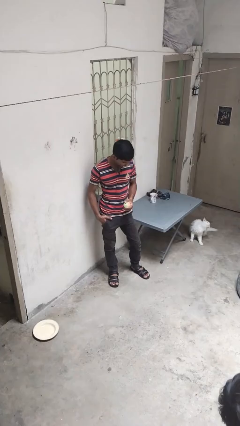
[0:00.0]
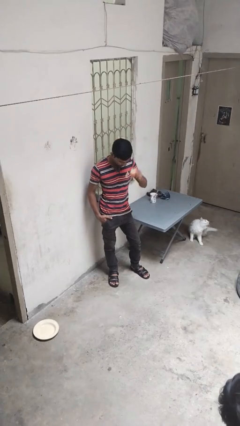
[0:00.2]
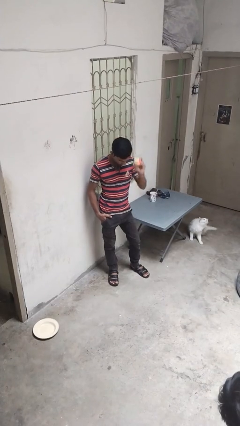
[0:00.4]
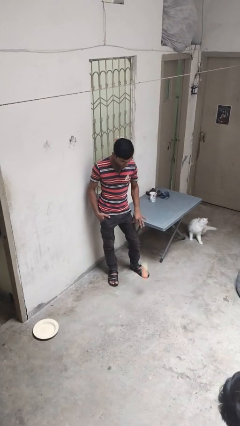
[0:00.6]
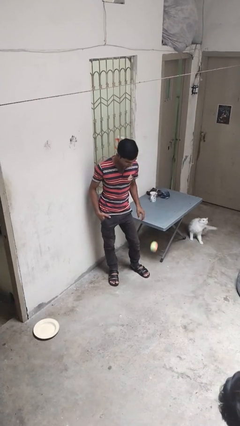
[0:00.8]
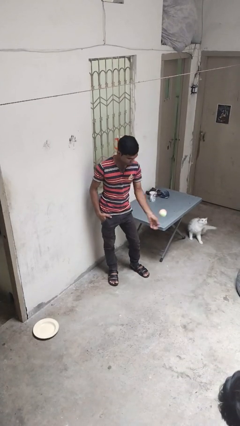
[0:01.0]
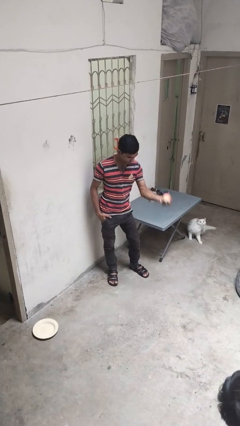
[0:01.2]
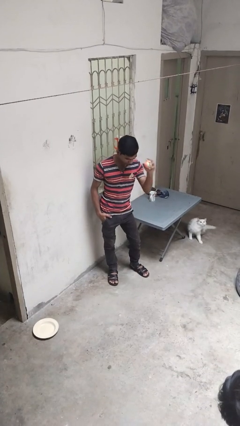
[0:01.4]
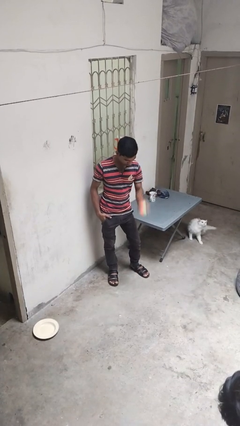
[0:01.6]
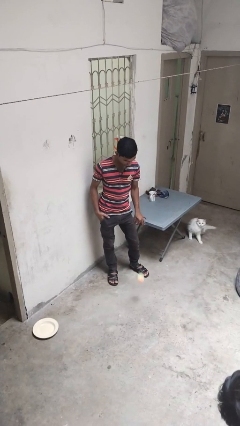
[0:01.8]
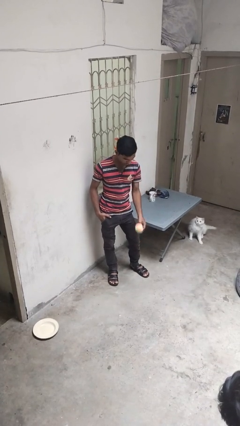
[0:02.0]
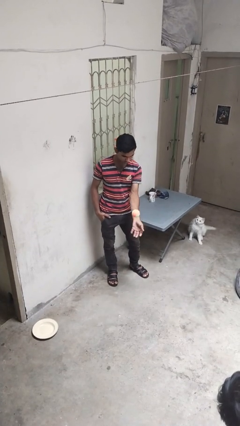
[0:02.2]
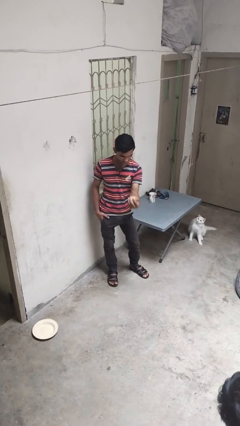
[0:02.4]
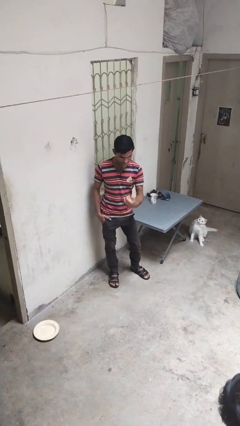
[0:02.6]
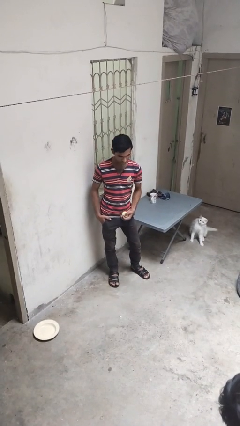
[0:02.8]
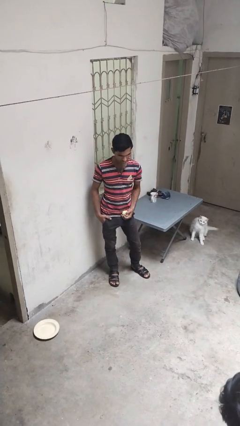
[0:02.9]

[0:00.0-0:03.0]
person bounces ball on floor

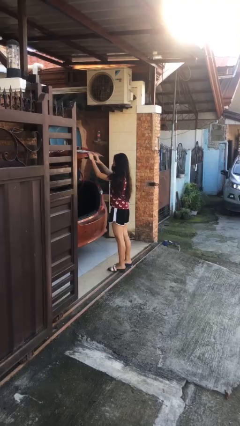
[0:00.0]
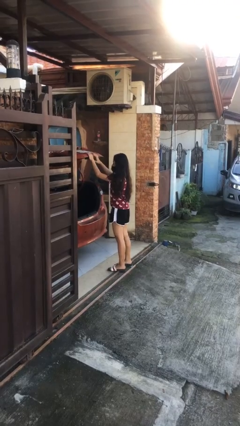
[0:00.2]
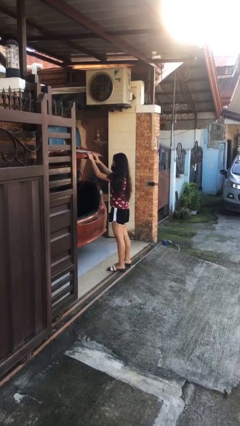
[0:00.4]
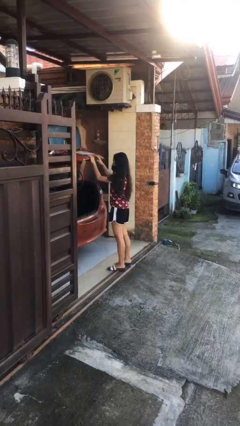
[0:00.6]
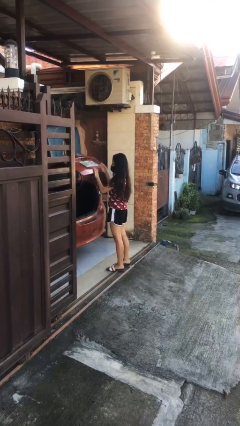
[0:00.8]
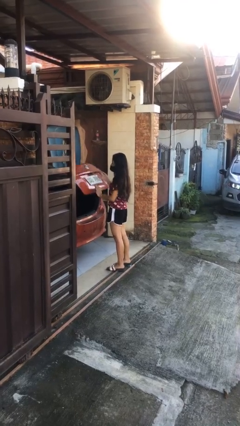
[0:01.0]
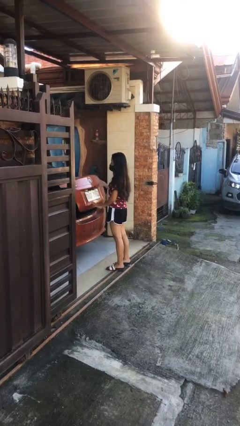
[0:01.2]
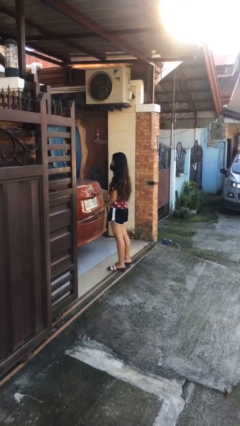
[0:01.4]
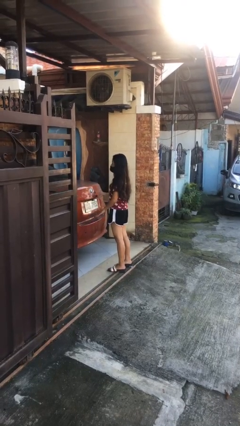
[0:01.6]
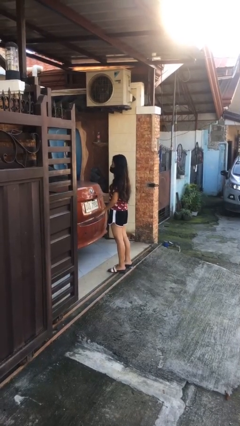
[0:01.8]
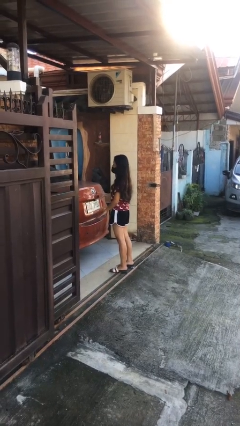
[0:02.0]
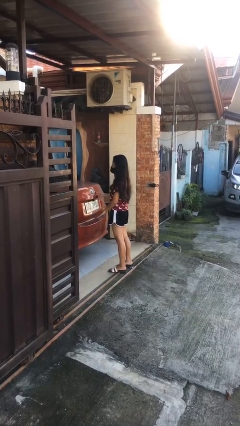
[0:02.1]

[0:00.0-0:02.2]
person closes car trunk

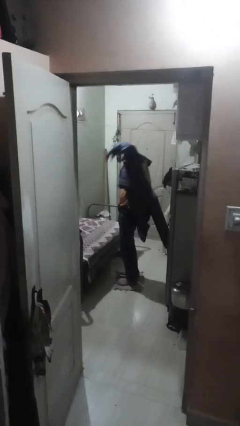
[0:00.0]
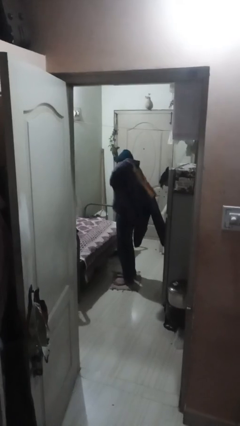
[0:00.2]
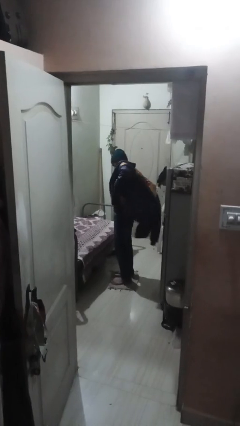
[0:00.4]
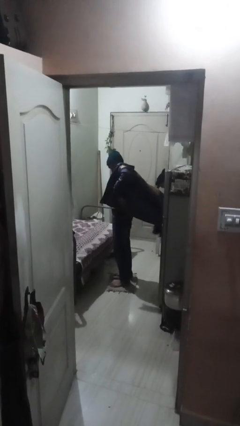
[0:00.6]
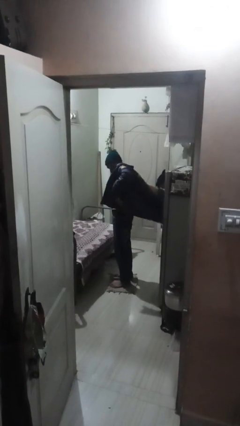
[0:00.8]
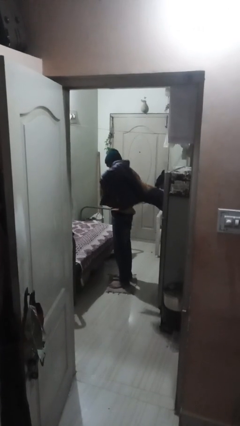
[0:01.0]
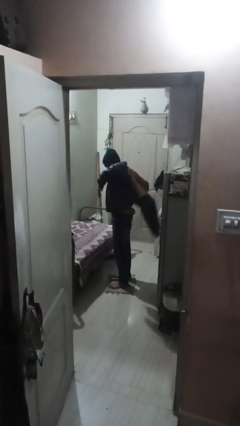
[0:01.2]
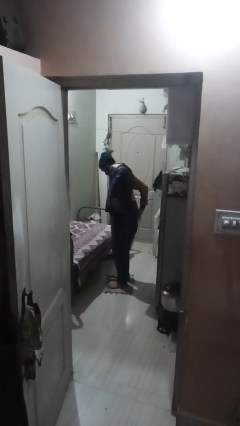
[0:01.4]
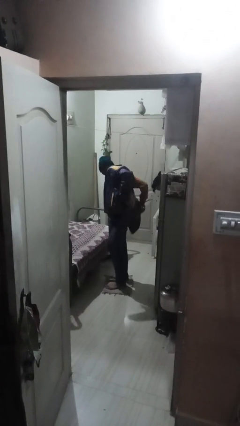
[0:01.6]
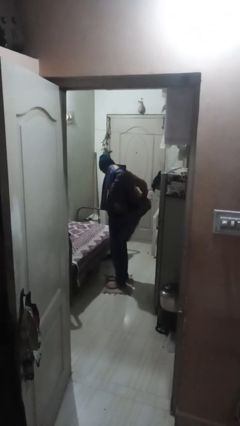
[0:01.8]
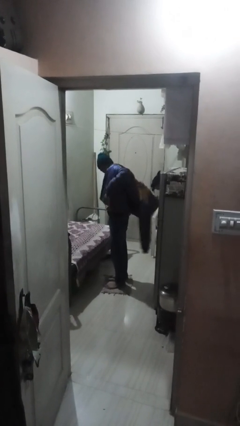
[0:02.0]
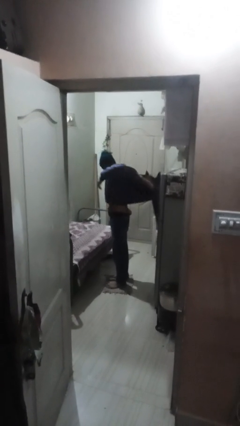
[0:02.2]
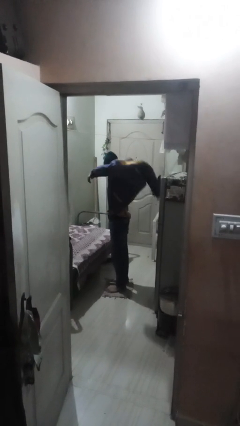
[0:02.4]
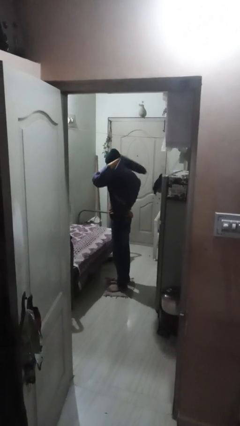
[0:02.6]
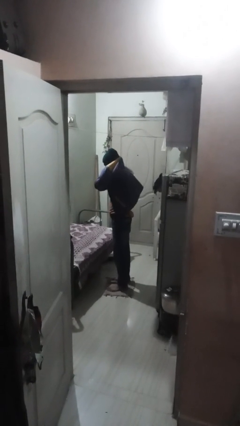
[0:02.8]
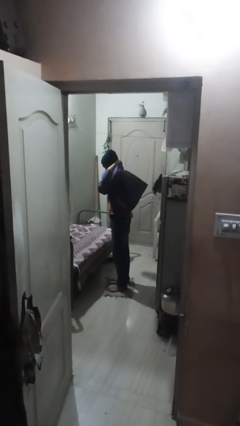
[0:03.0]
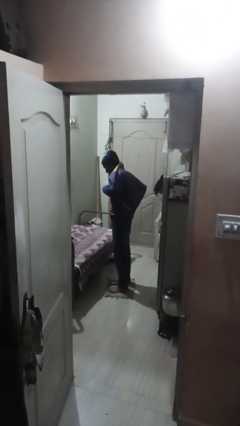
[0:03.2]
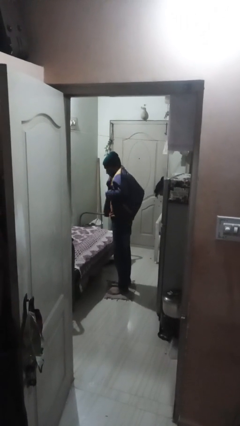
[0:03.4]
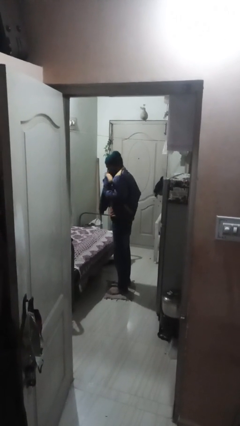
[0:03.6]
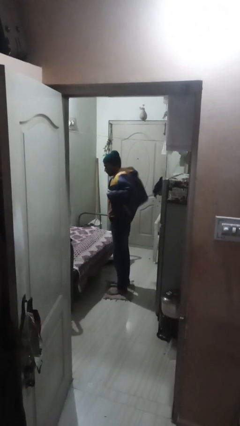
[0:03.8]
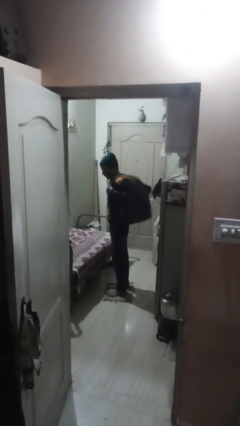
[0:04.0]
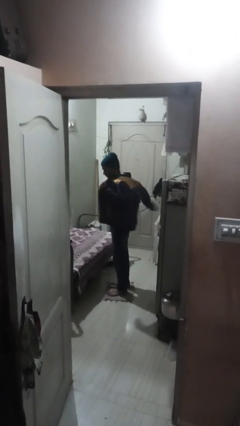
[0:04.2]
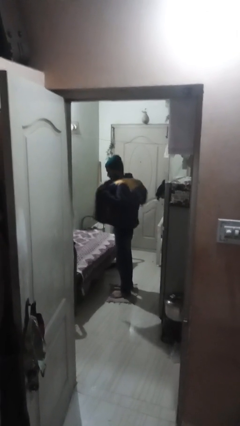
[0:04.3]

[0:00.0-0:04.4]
person puts on jacket

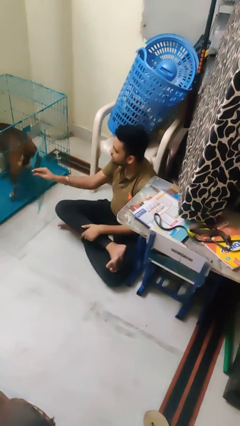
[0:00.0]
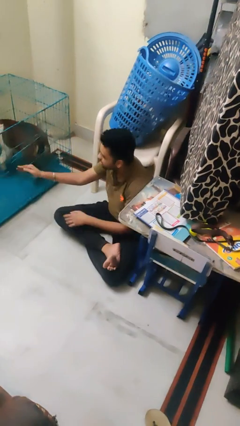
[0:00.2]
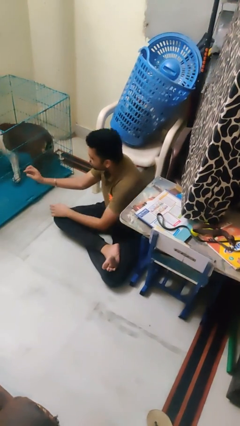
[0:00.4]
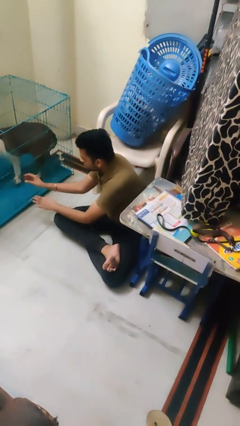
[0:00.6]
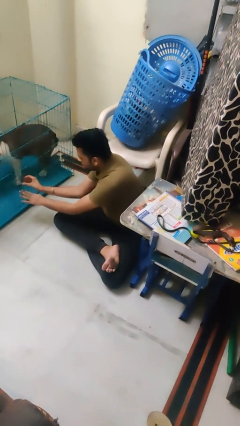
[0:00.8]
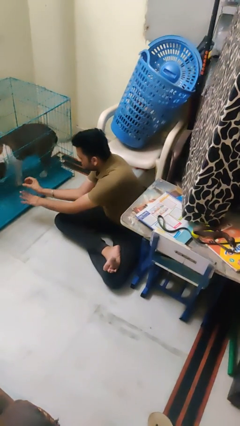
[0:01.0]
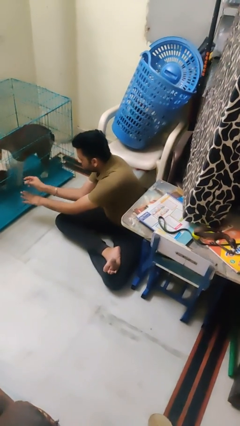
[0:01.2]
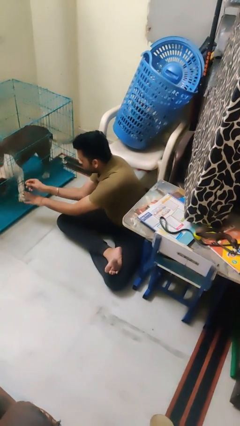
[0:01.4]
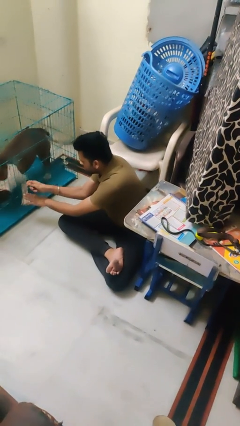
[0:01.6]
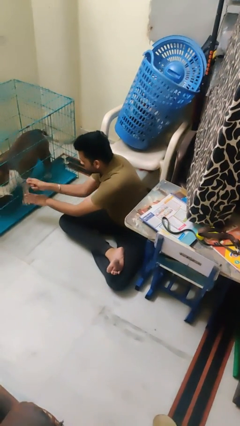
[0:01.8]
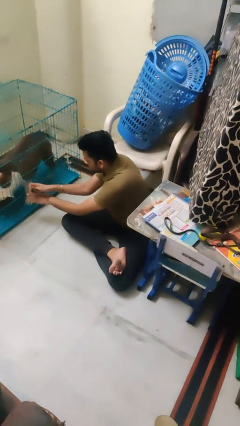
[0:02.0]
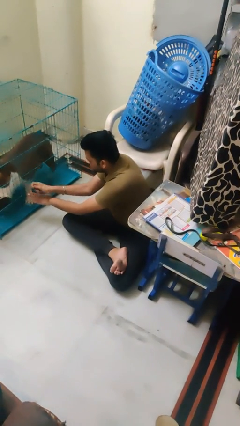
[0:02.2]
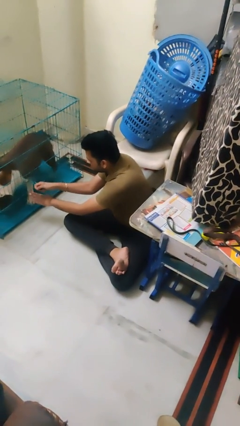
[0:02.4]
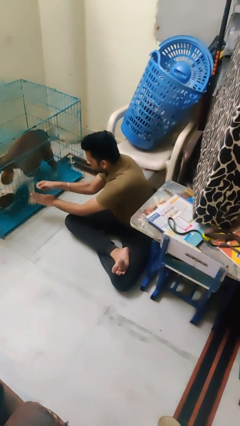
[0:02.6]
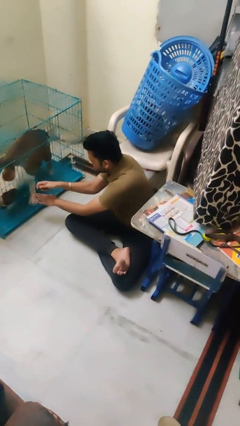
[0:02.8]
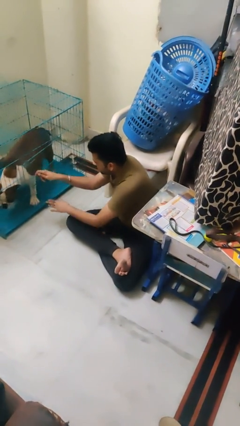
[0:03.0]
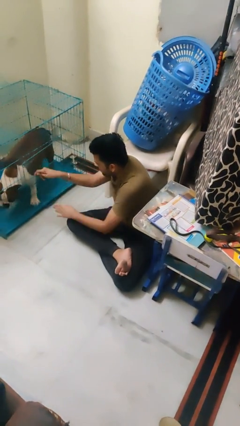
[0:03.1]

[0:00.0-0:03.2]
person crates dog

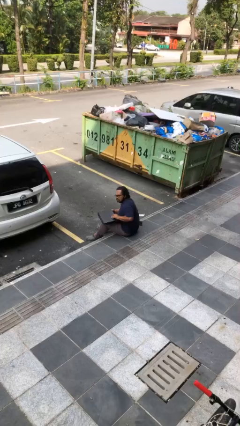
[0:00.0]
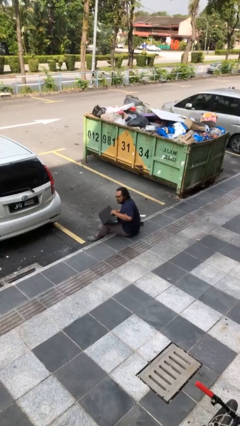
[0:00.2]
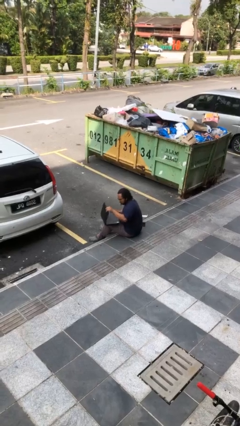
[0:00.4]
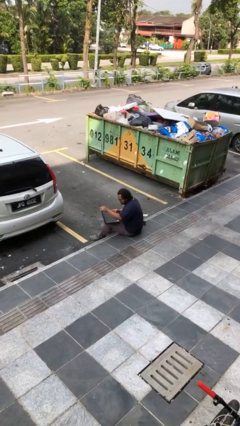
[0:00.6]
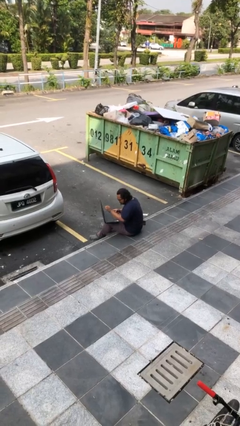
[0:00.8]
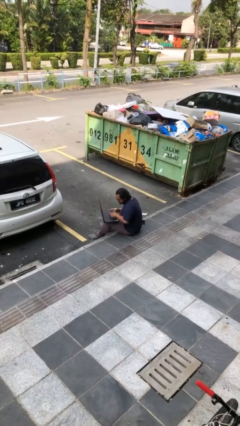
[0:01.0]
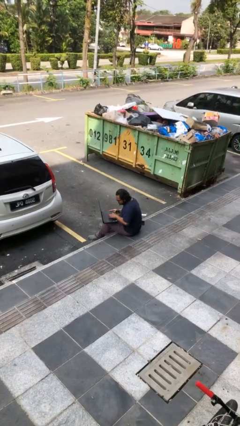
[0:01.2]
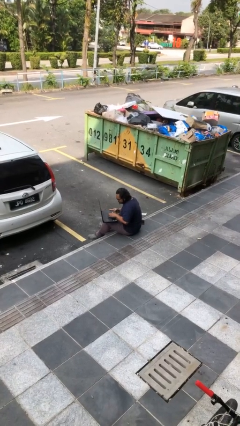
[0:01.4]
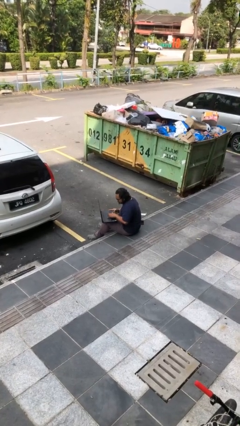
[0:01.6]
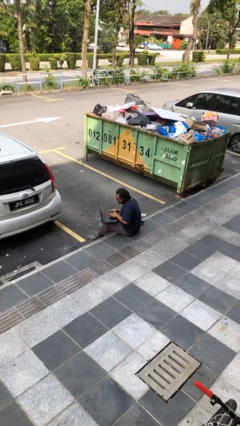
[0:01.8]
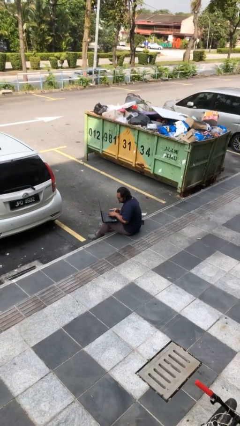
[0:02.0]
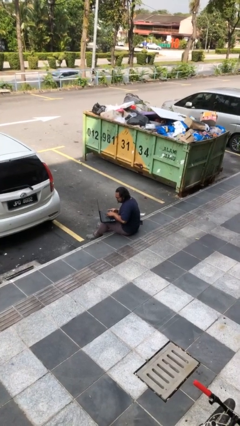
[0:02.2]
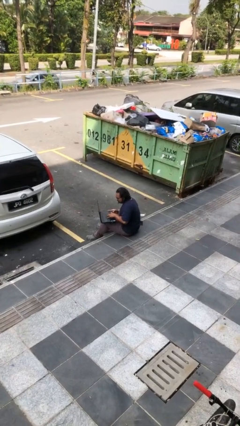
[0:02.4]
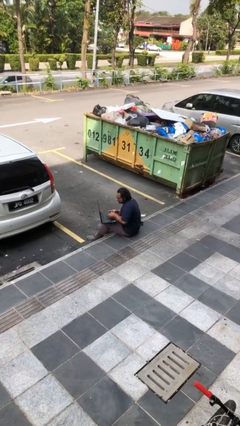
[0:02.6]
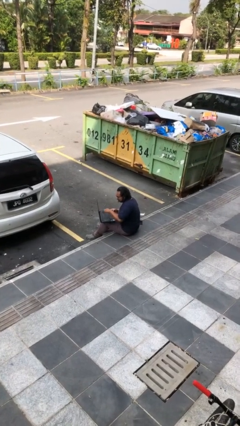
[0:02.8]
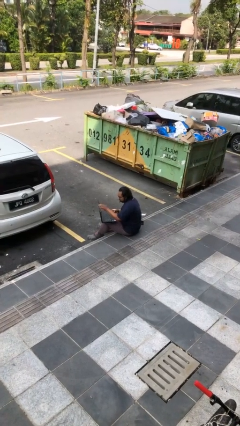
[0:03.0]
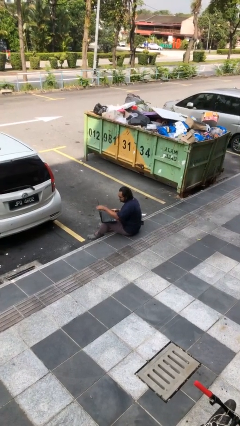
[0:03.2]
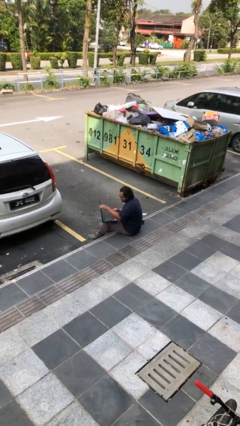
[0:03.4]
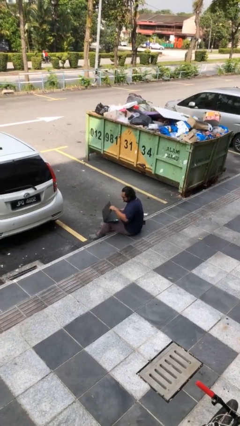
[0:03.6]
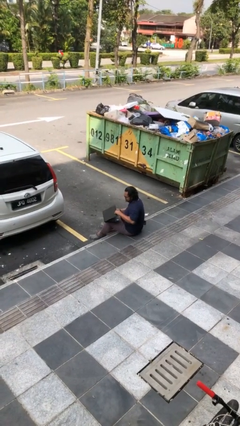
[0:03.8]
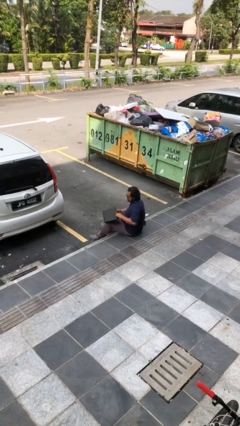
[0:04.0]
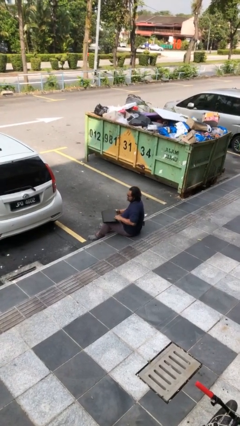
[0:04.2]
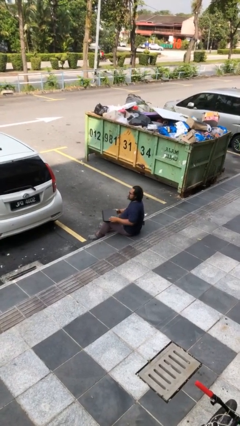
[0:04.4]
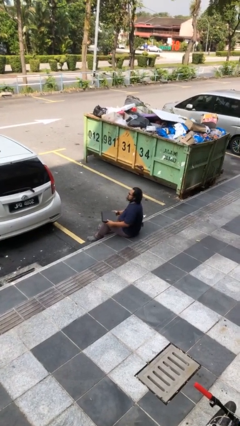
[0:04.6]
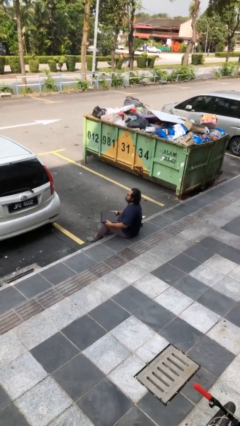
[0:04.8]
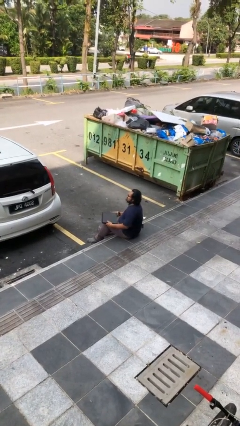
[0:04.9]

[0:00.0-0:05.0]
person interacts with laptop
